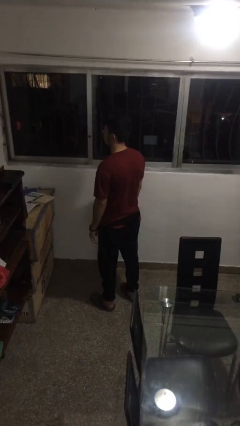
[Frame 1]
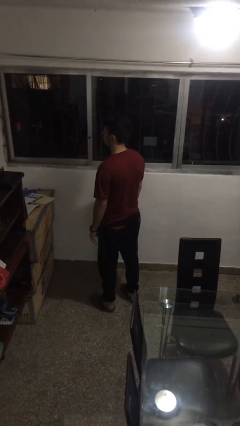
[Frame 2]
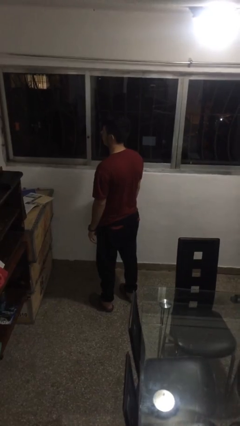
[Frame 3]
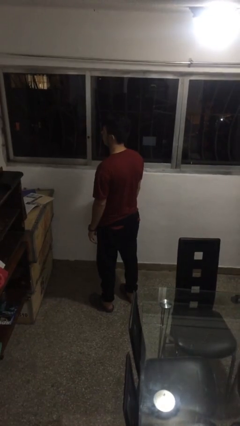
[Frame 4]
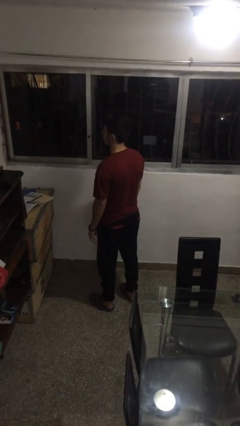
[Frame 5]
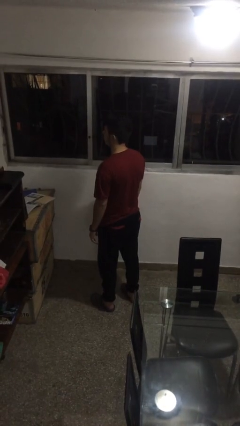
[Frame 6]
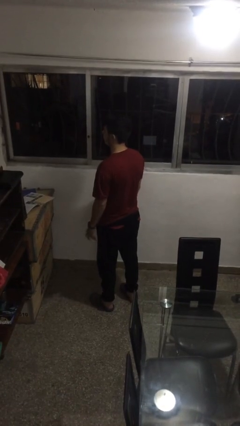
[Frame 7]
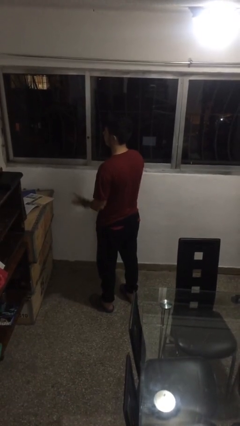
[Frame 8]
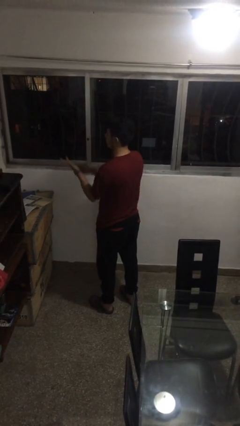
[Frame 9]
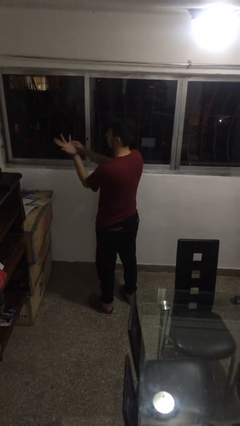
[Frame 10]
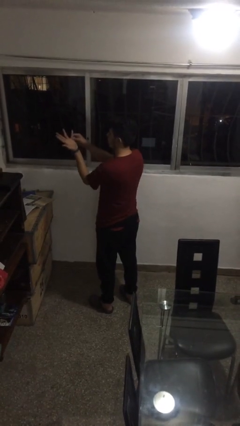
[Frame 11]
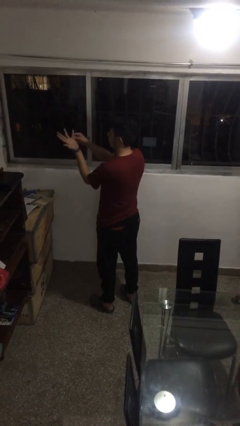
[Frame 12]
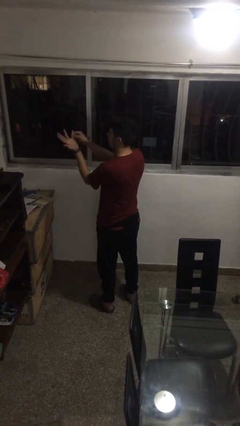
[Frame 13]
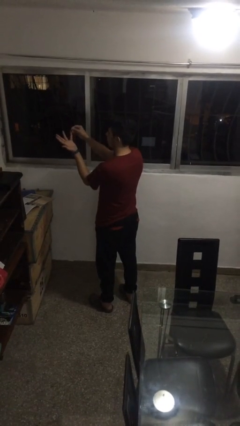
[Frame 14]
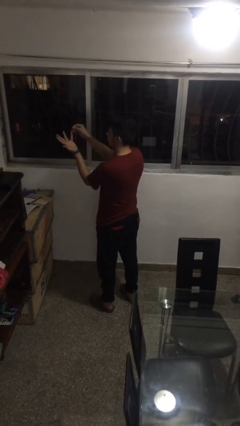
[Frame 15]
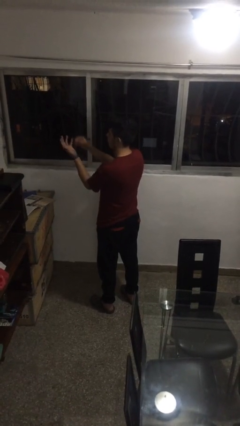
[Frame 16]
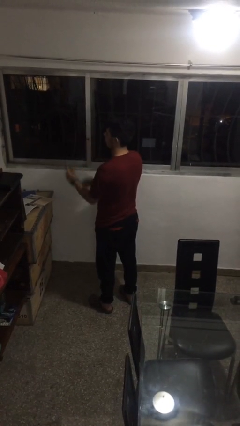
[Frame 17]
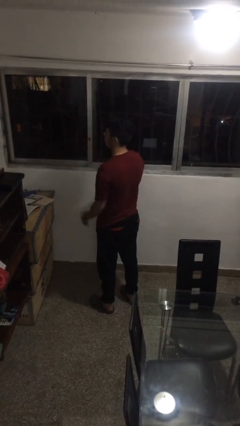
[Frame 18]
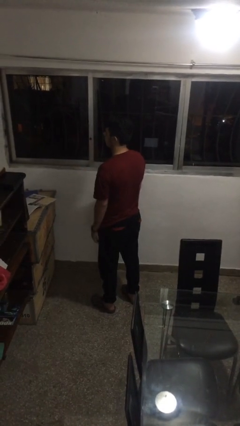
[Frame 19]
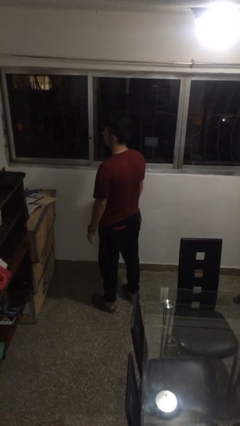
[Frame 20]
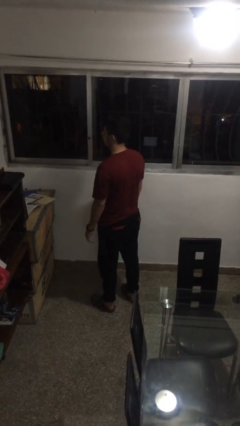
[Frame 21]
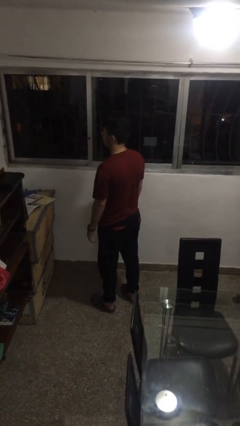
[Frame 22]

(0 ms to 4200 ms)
person takes off ring

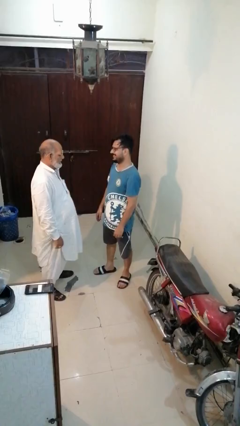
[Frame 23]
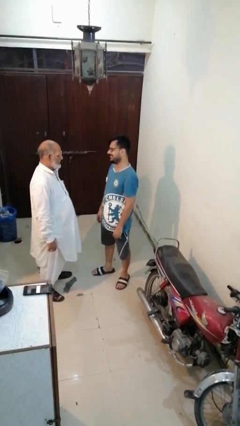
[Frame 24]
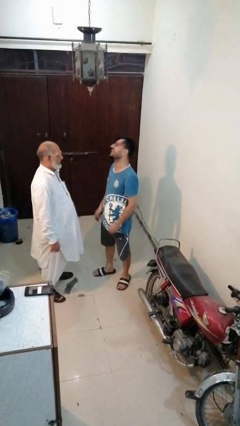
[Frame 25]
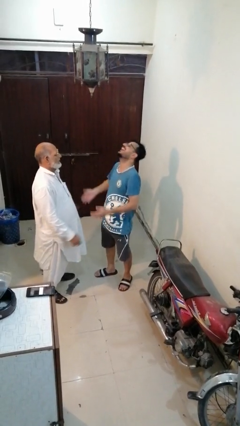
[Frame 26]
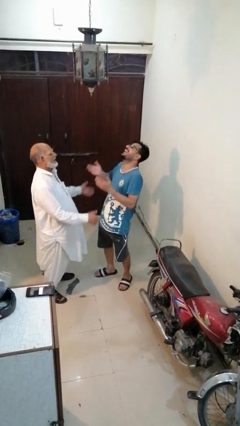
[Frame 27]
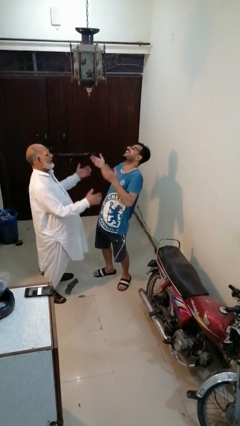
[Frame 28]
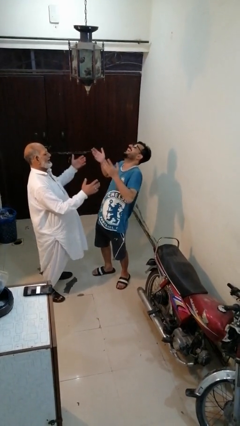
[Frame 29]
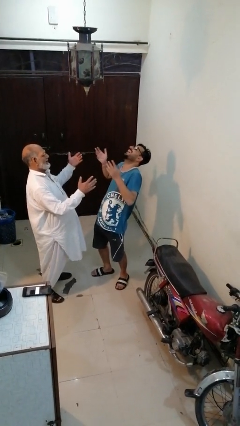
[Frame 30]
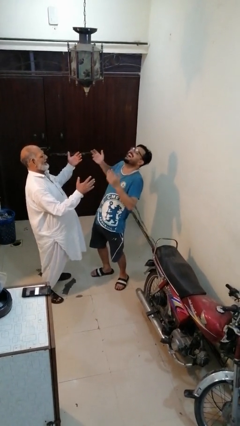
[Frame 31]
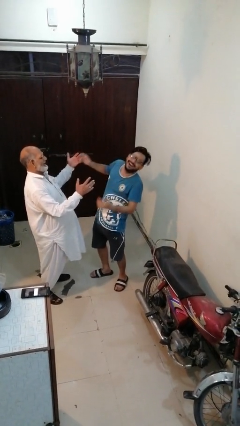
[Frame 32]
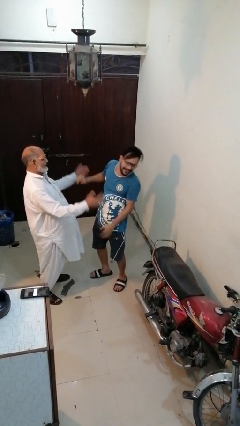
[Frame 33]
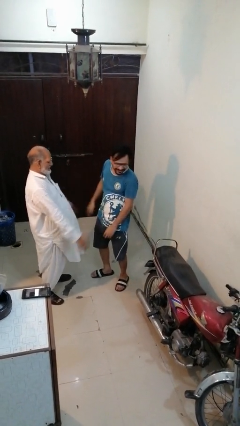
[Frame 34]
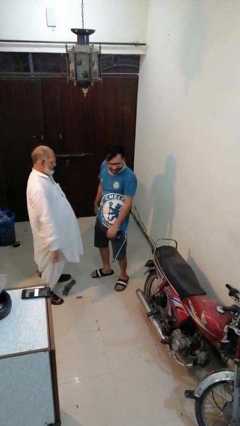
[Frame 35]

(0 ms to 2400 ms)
person laughs with person

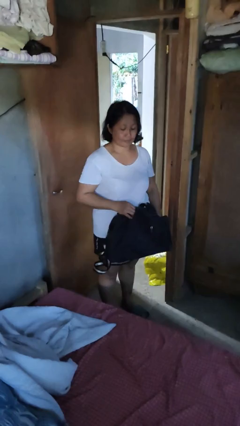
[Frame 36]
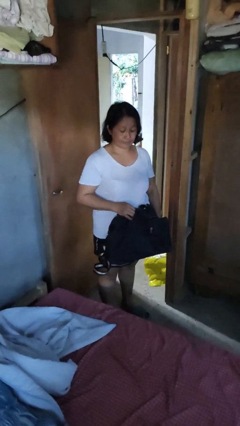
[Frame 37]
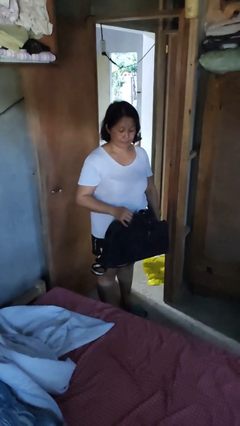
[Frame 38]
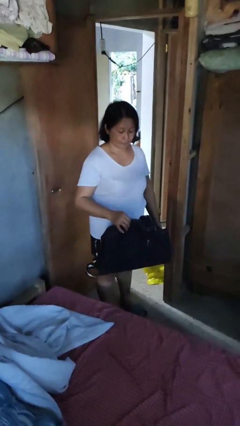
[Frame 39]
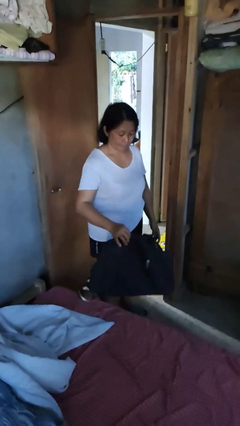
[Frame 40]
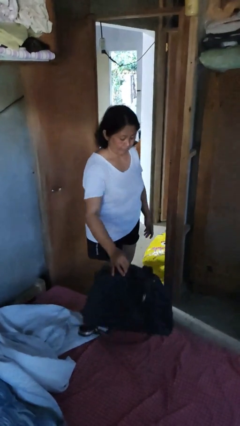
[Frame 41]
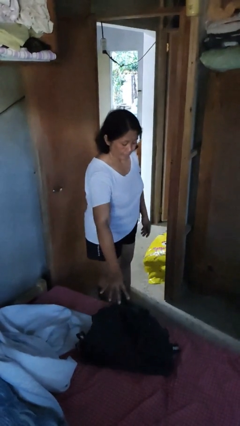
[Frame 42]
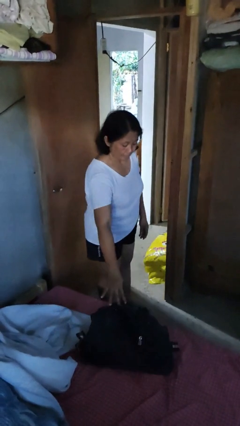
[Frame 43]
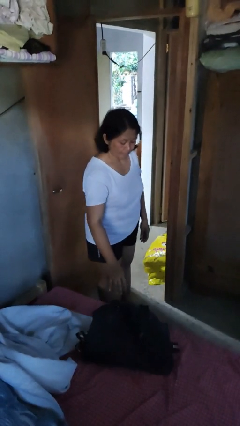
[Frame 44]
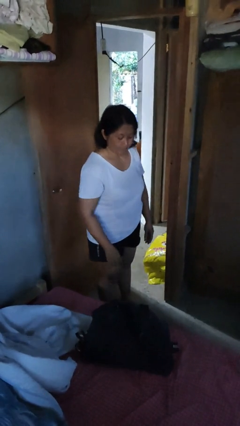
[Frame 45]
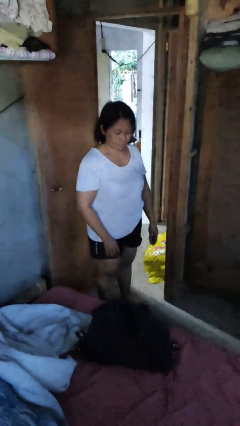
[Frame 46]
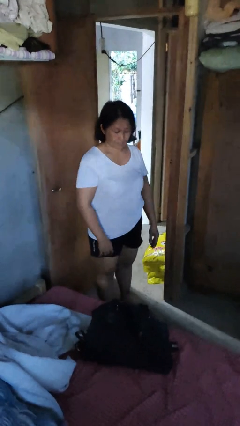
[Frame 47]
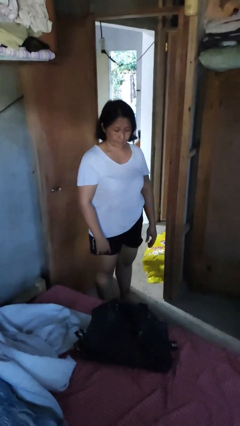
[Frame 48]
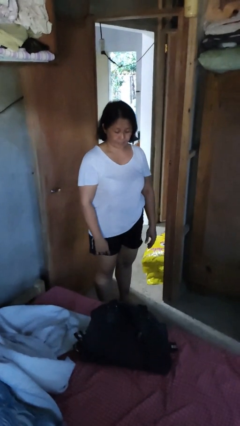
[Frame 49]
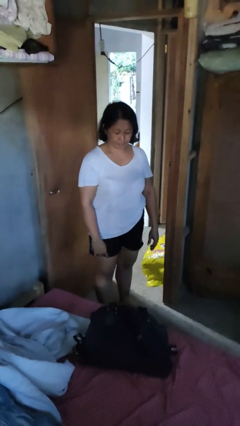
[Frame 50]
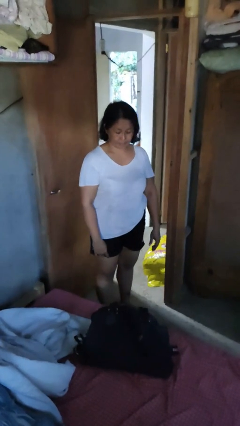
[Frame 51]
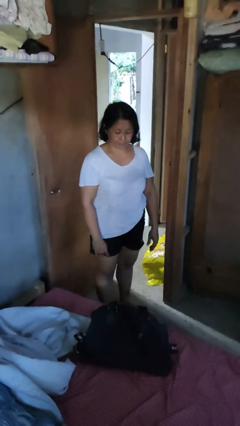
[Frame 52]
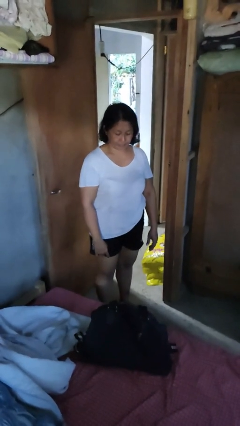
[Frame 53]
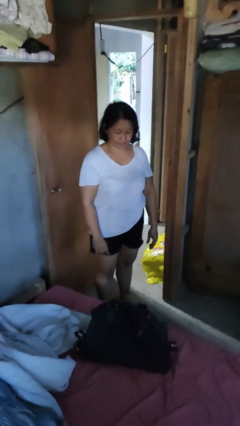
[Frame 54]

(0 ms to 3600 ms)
person puts down object on bed

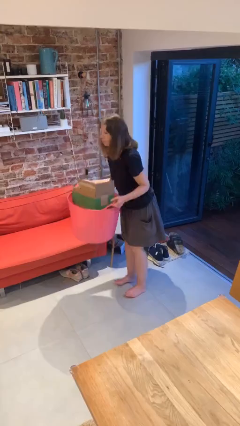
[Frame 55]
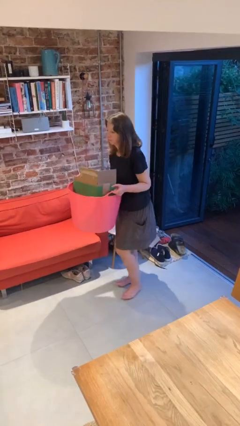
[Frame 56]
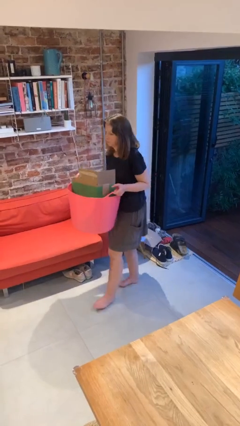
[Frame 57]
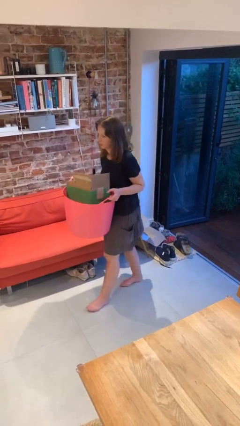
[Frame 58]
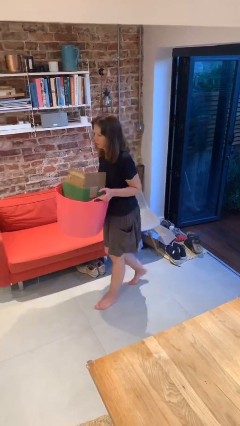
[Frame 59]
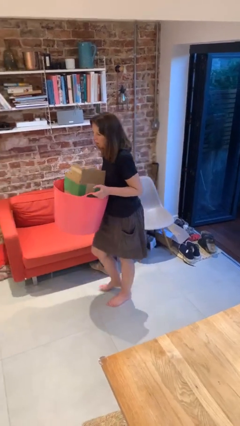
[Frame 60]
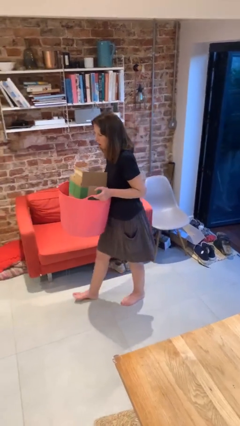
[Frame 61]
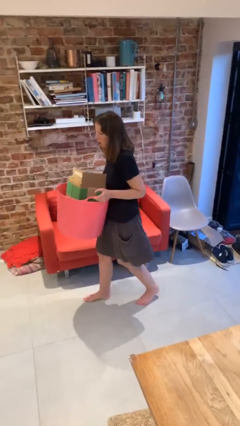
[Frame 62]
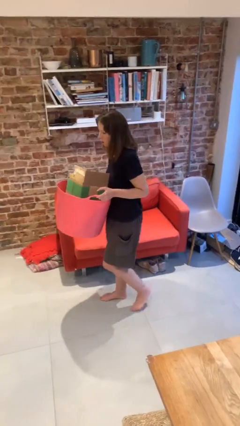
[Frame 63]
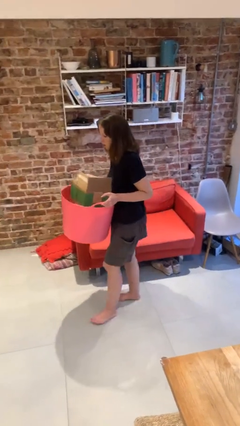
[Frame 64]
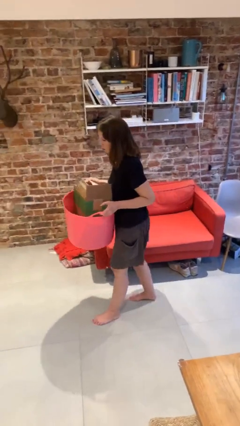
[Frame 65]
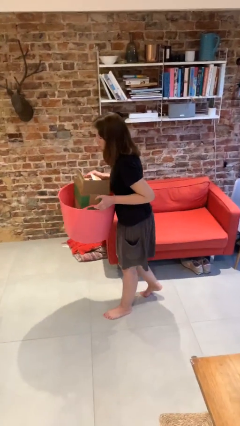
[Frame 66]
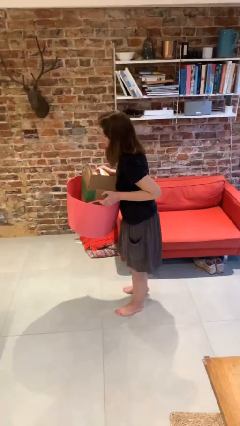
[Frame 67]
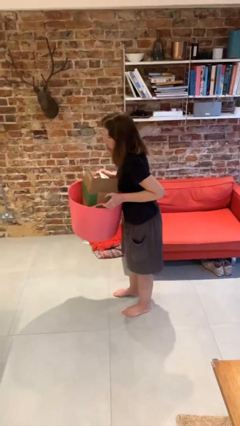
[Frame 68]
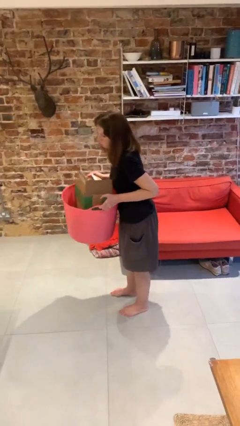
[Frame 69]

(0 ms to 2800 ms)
person carries heavy object

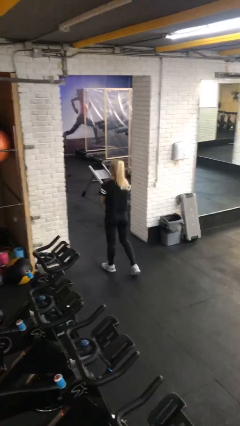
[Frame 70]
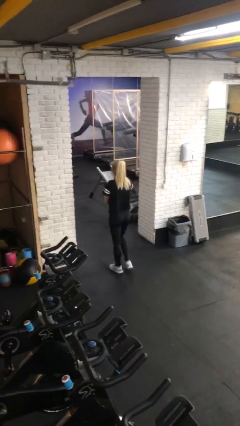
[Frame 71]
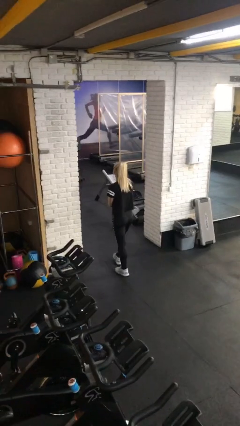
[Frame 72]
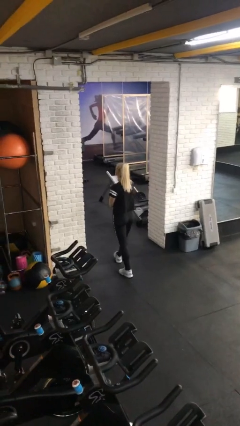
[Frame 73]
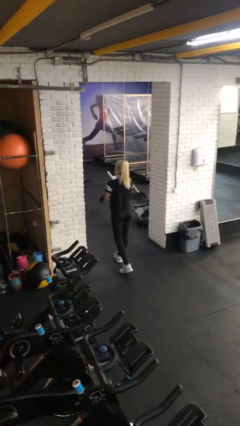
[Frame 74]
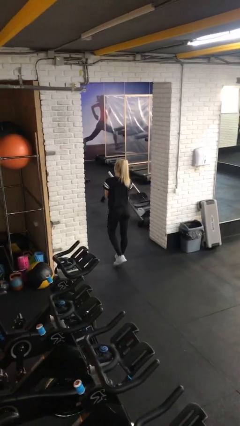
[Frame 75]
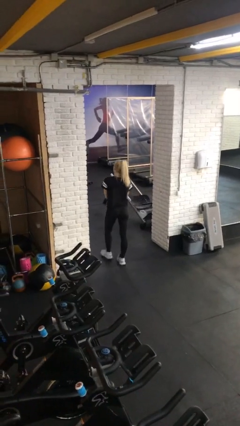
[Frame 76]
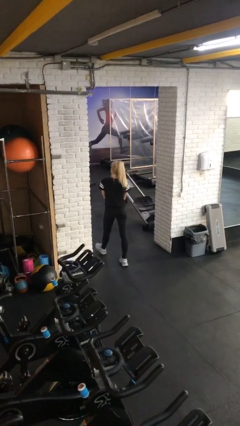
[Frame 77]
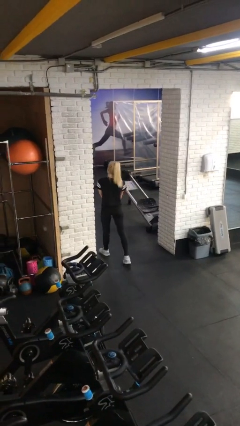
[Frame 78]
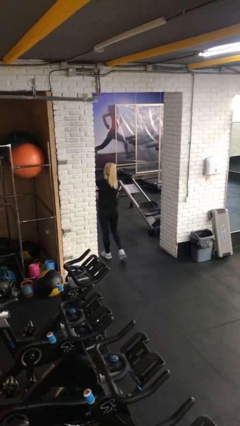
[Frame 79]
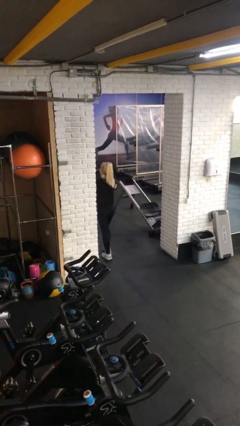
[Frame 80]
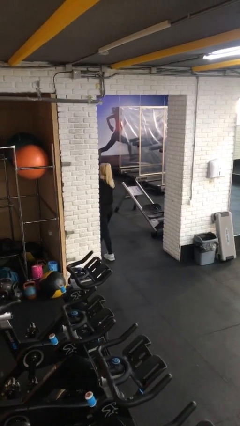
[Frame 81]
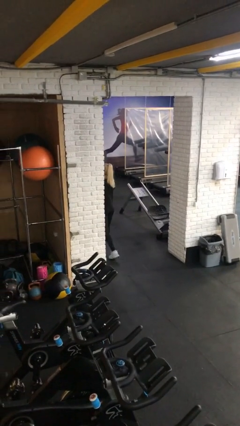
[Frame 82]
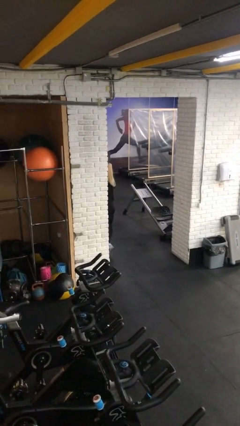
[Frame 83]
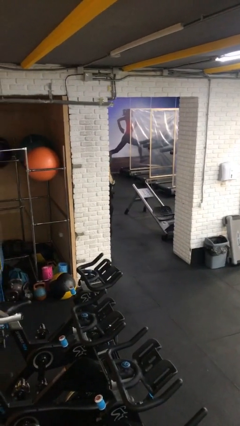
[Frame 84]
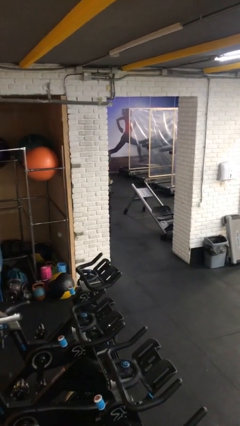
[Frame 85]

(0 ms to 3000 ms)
person exits scene through structure

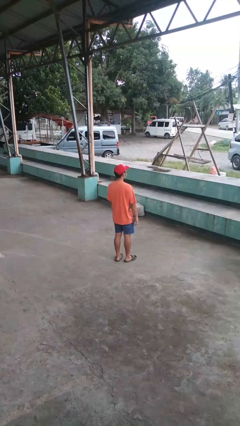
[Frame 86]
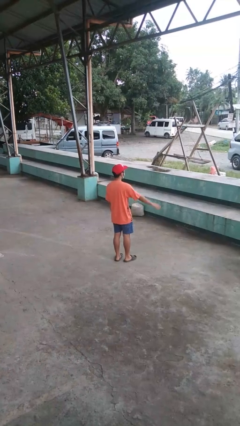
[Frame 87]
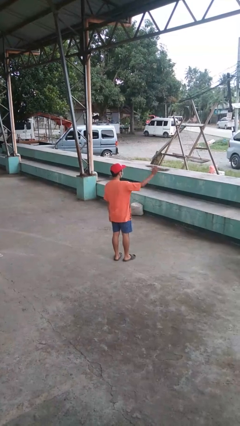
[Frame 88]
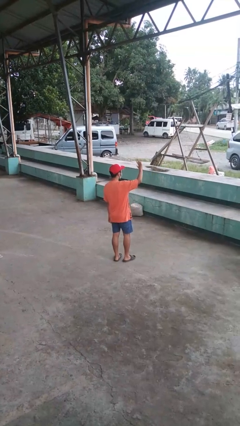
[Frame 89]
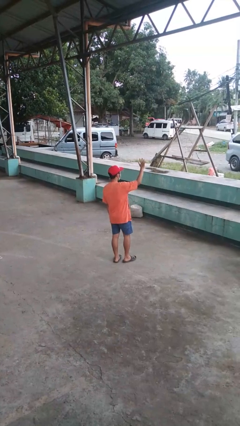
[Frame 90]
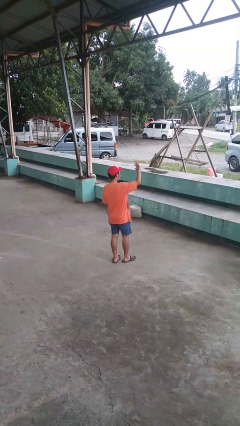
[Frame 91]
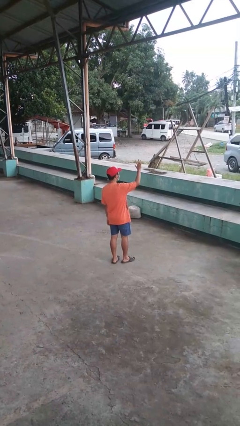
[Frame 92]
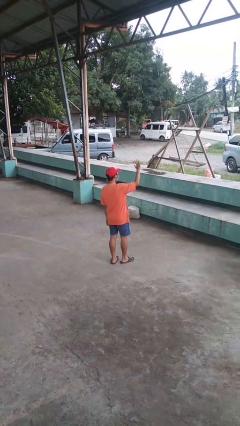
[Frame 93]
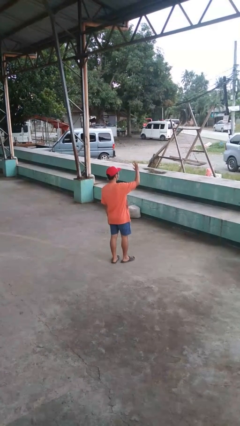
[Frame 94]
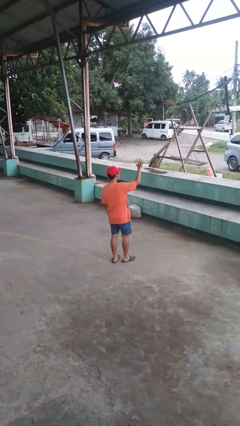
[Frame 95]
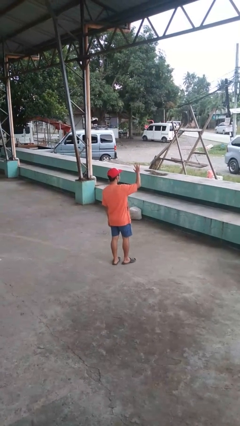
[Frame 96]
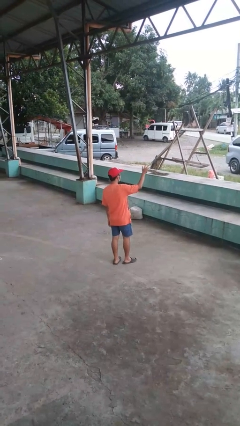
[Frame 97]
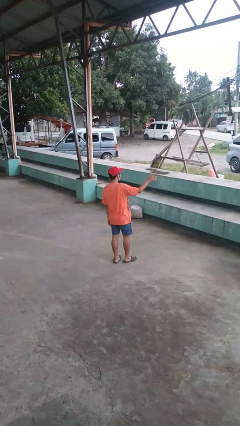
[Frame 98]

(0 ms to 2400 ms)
person waves at person
